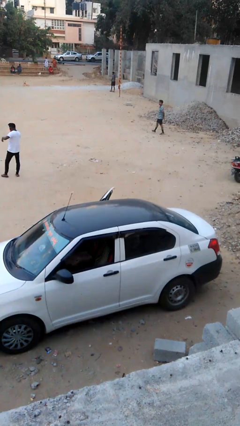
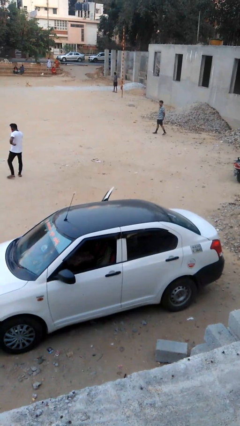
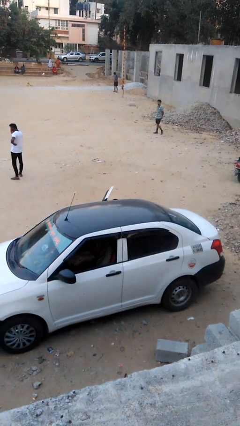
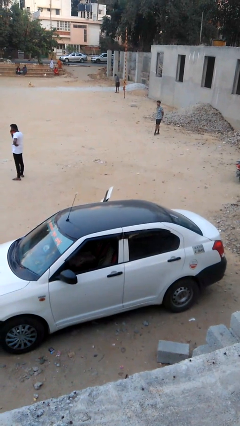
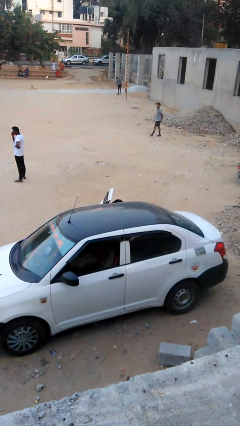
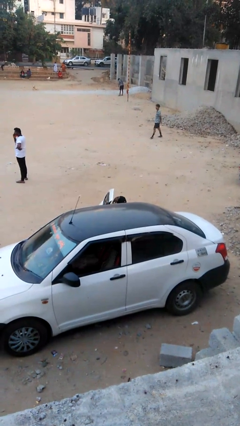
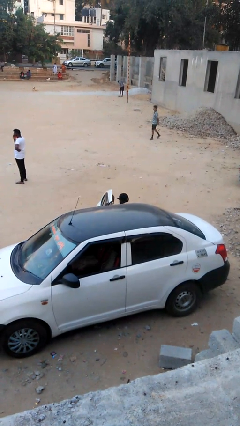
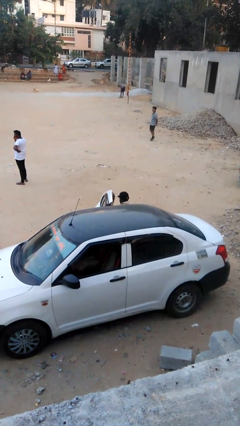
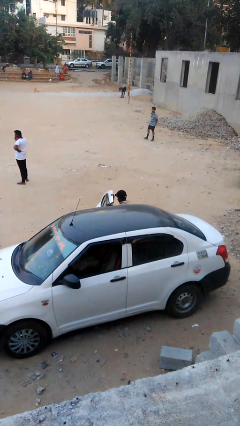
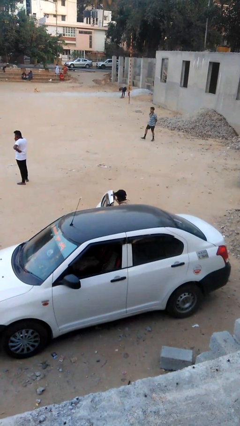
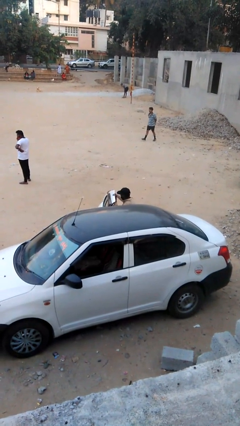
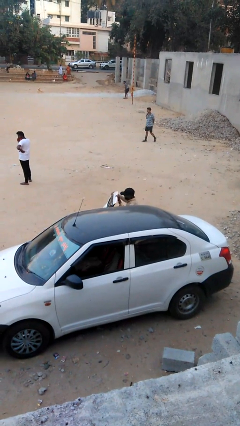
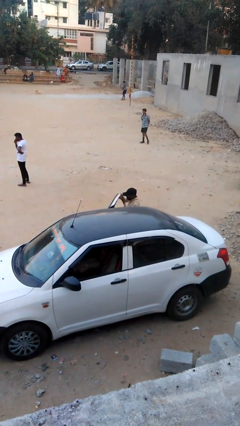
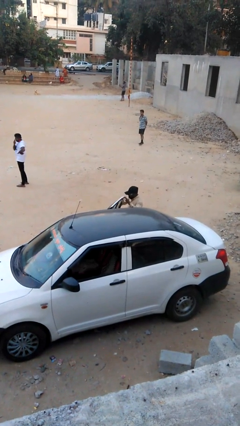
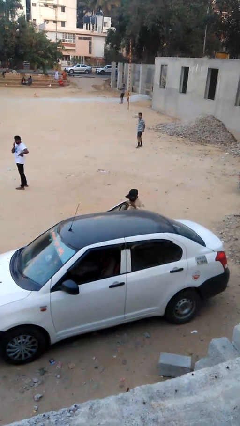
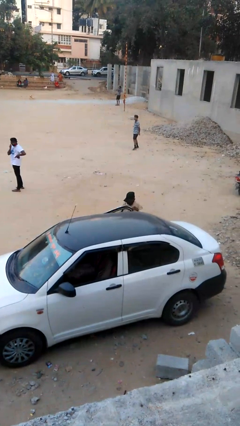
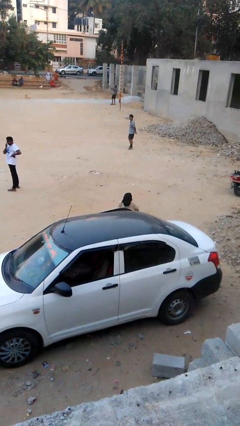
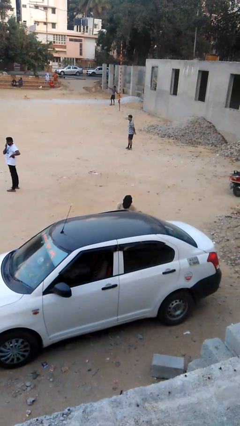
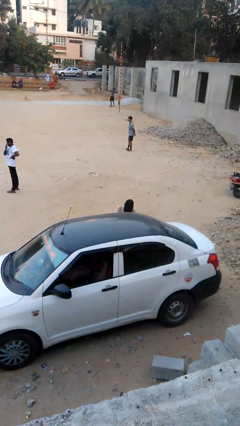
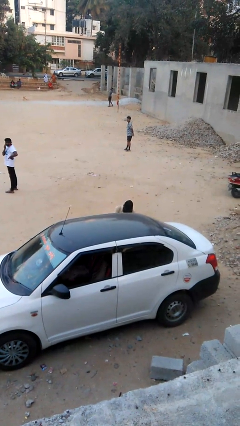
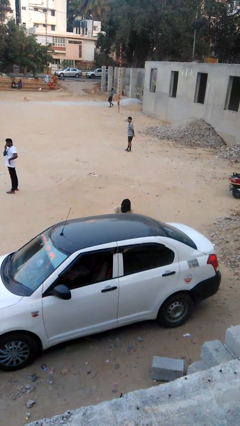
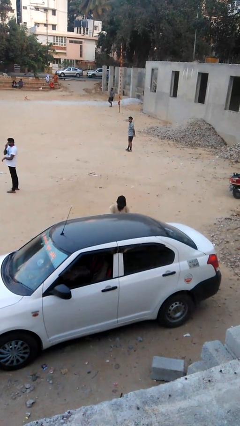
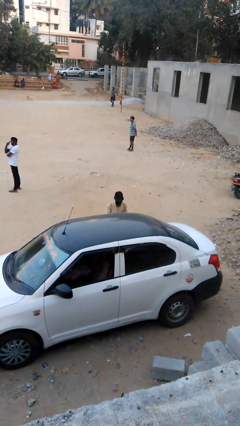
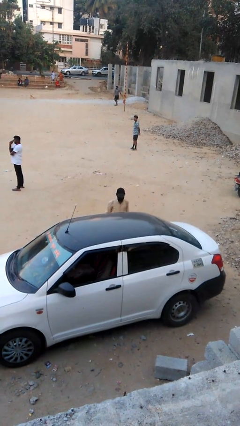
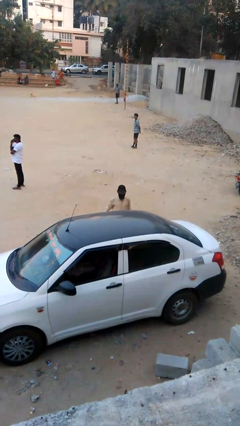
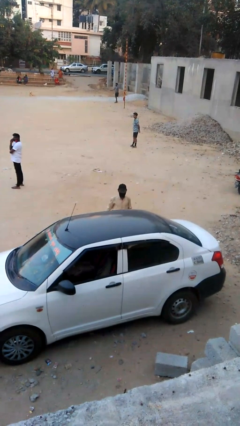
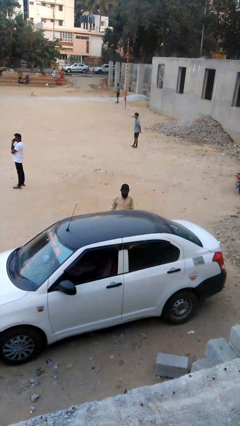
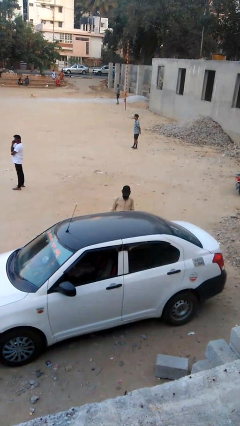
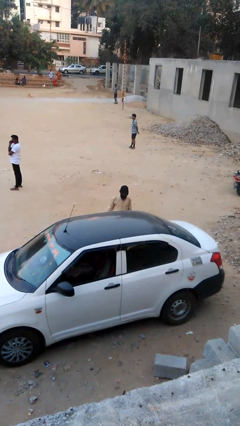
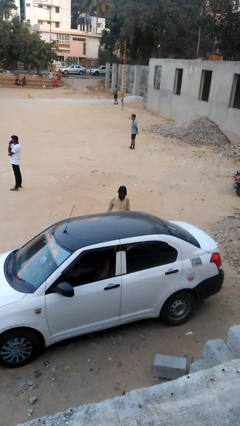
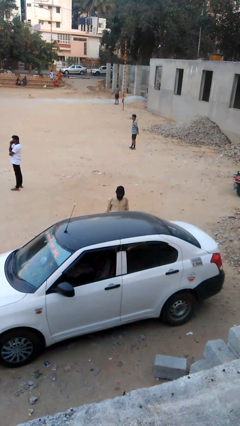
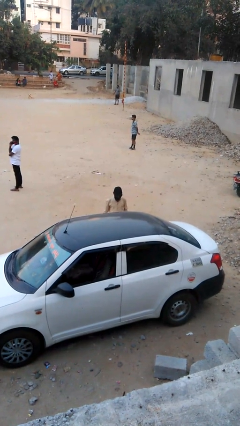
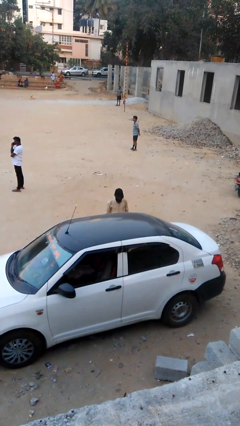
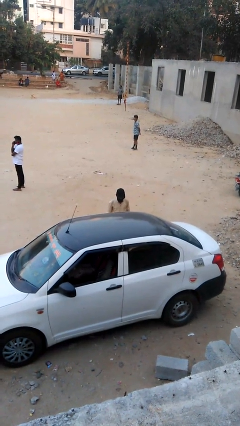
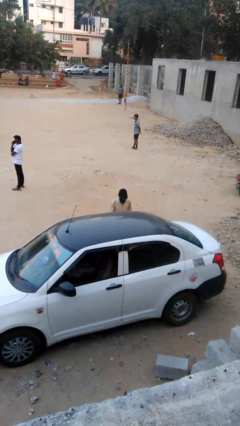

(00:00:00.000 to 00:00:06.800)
person exits car

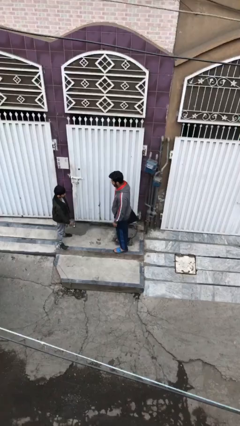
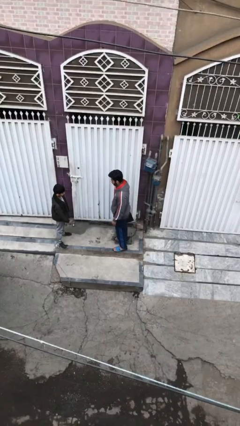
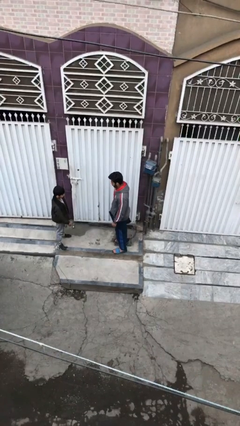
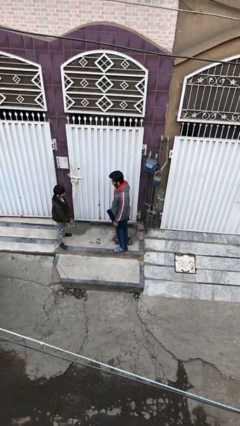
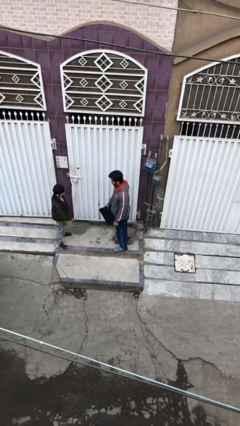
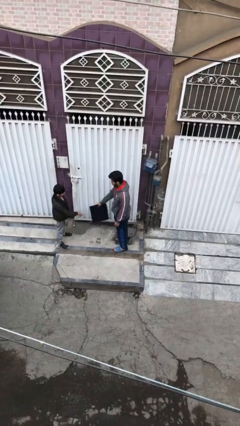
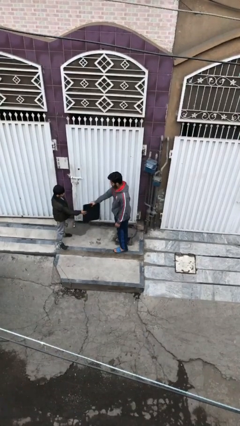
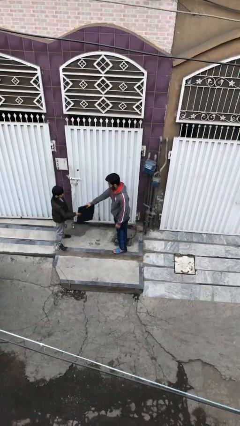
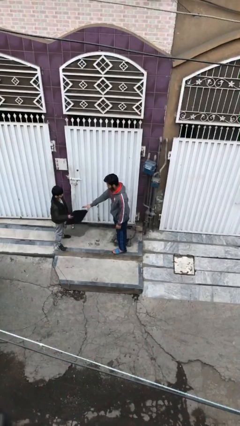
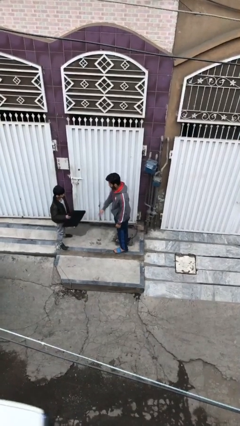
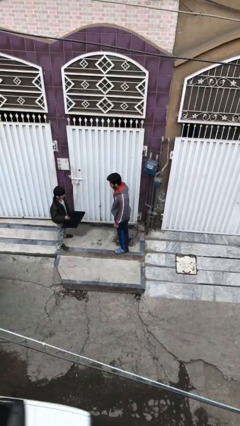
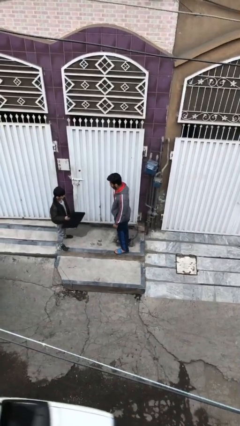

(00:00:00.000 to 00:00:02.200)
person transfers object to person

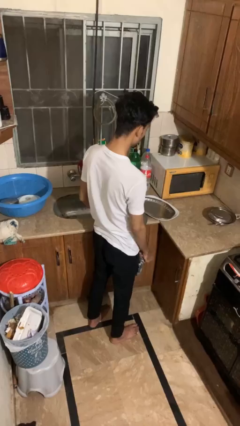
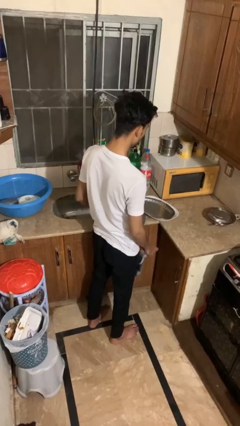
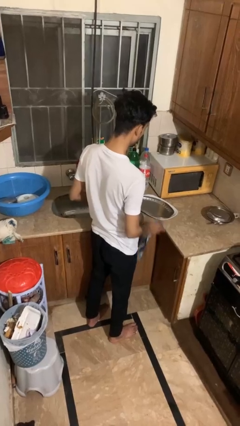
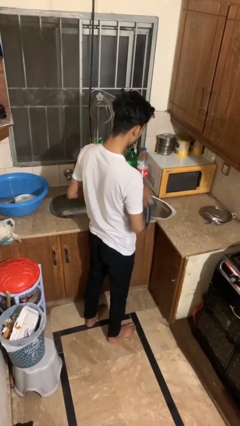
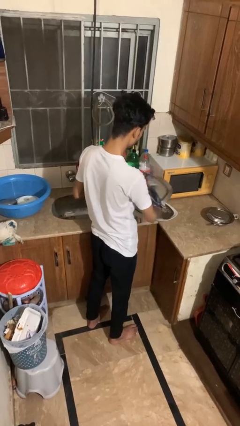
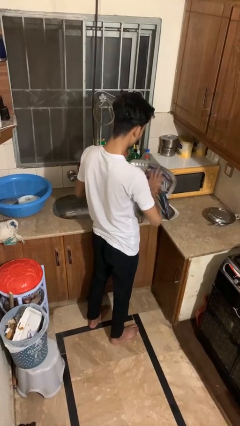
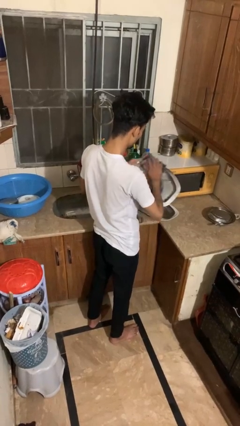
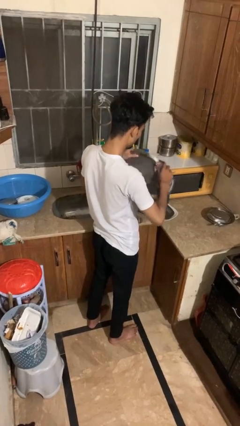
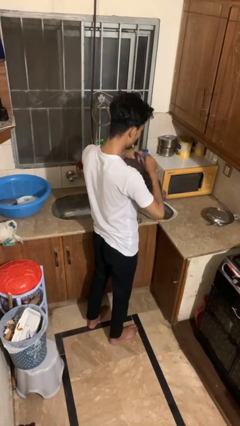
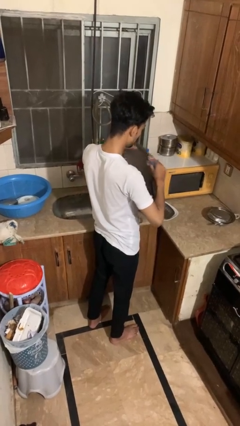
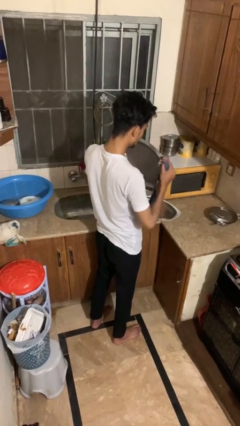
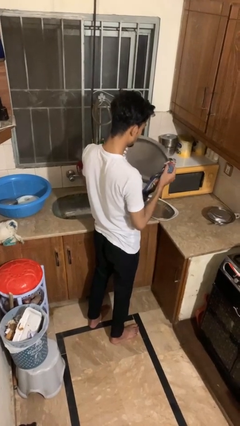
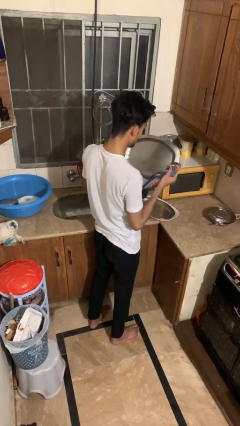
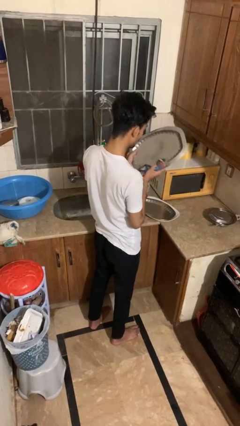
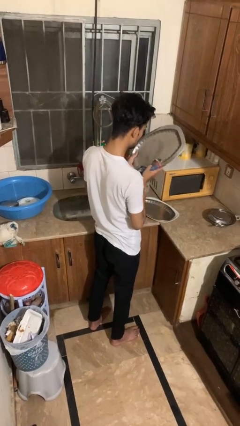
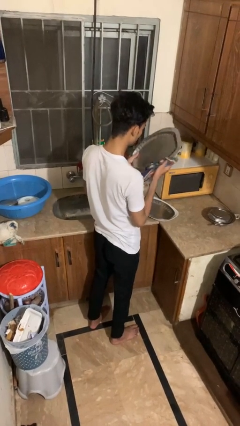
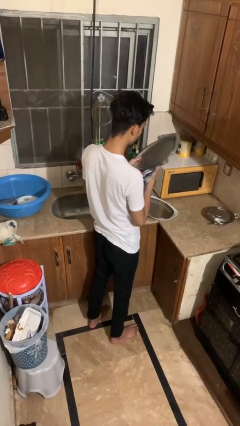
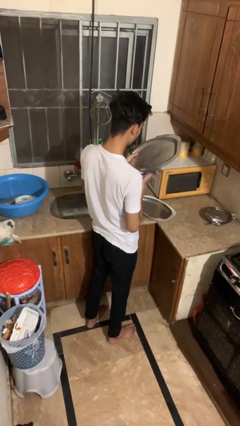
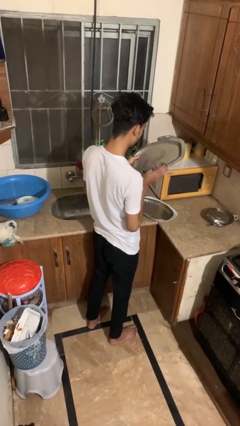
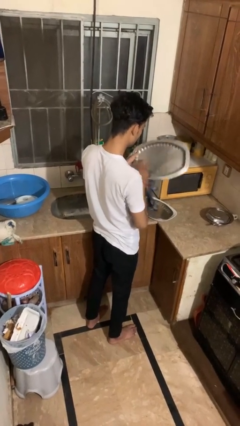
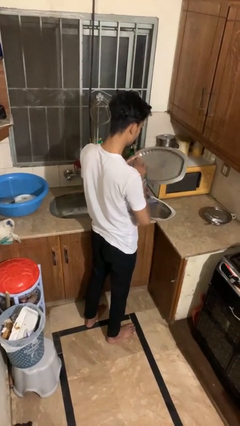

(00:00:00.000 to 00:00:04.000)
person dries dish

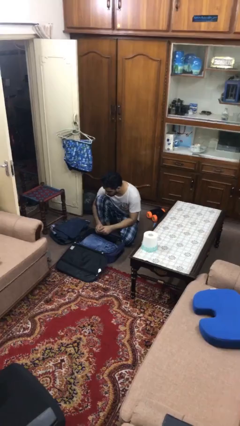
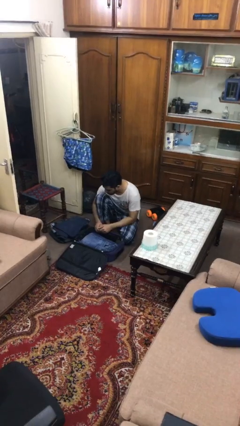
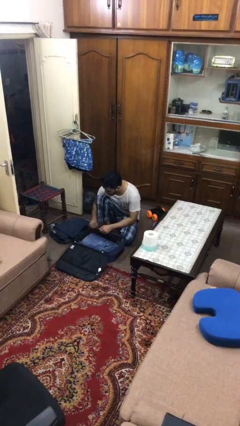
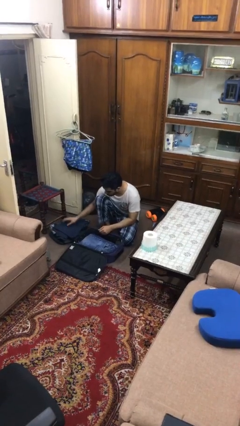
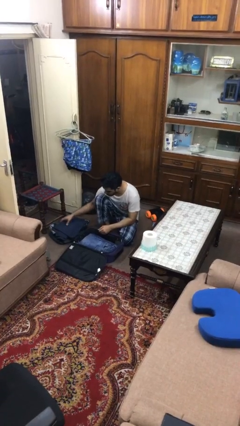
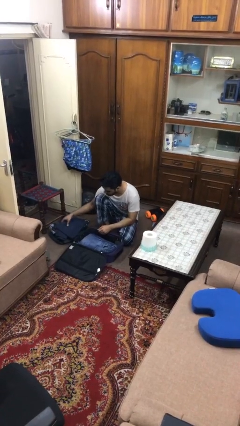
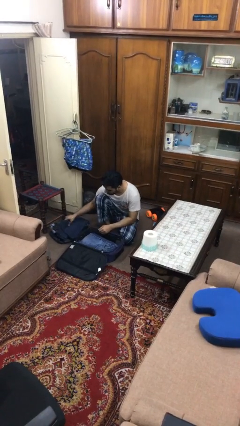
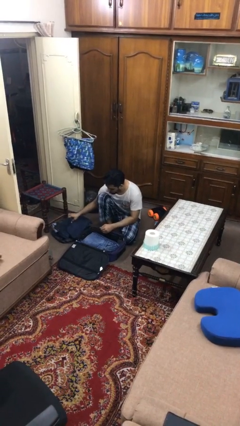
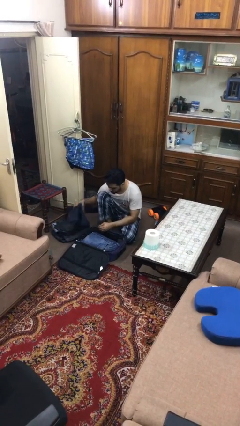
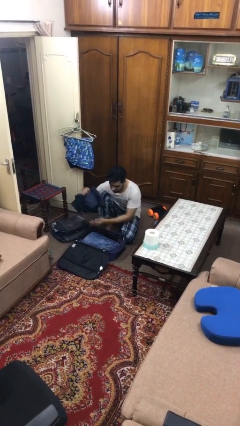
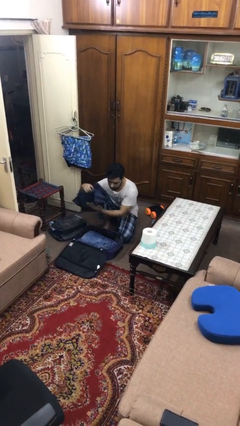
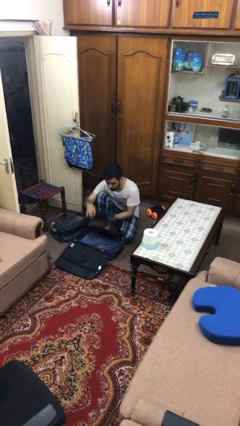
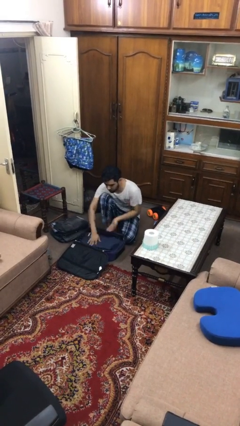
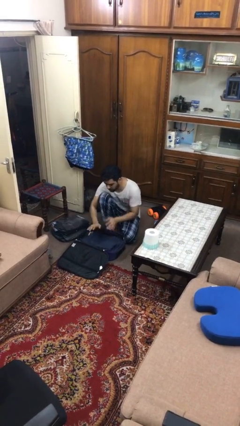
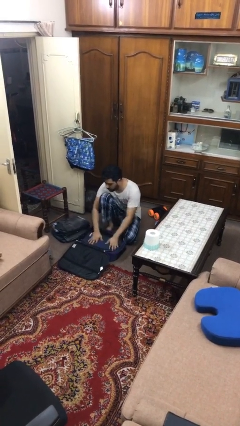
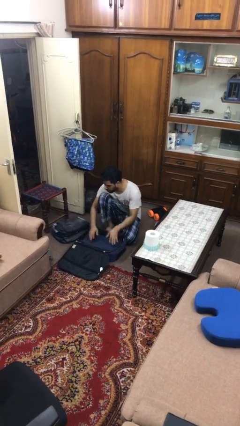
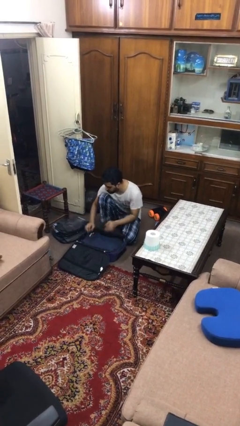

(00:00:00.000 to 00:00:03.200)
person loads clothes into suitcase

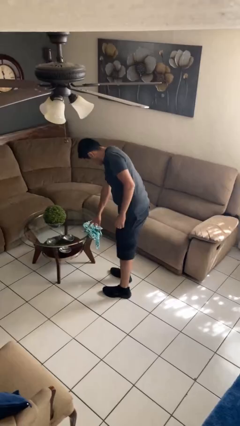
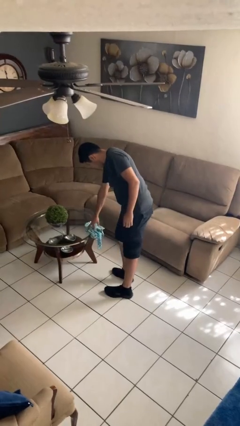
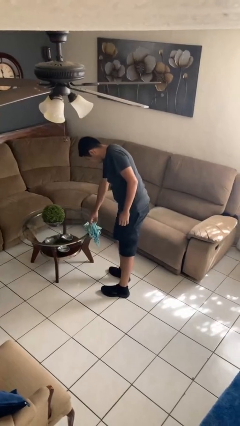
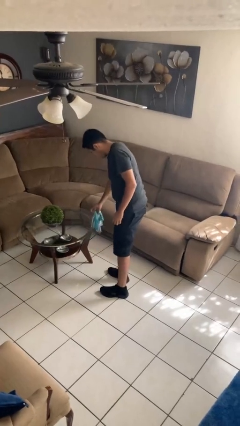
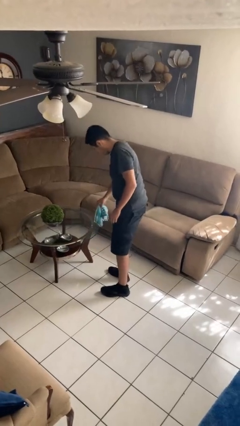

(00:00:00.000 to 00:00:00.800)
person picks up object from table

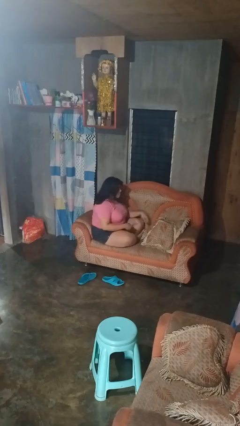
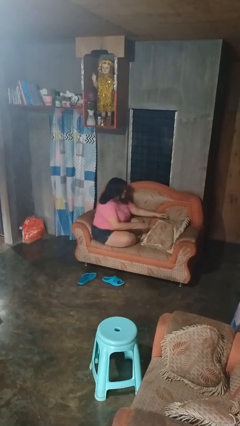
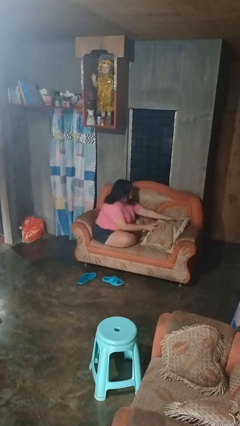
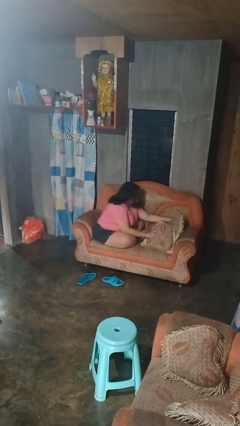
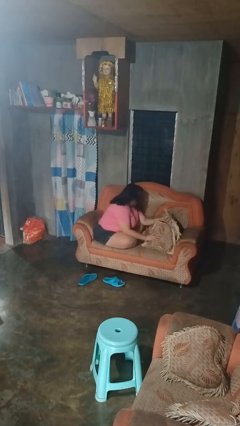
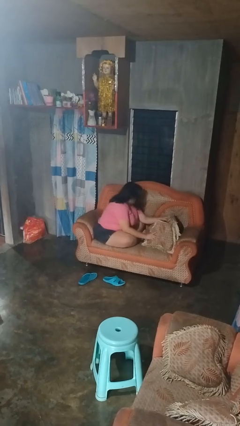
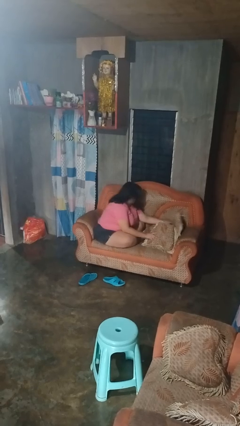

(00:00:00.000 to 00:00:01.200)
person searches in couch
